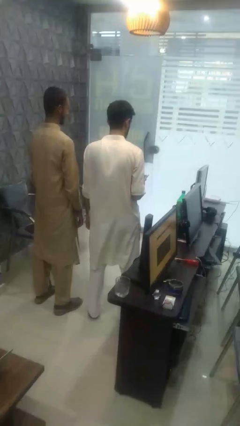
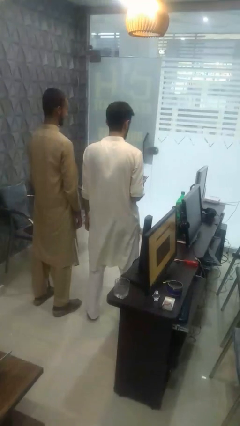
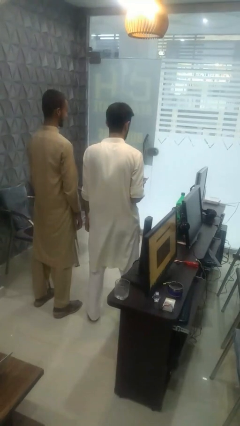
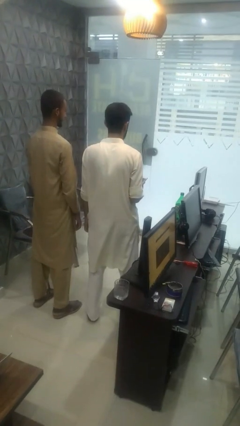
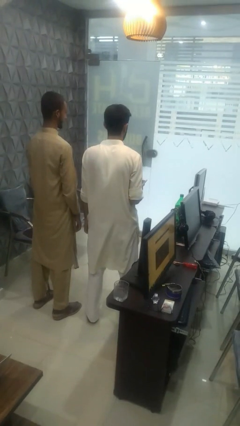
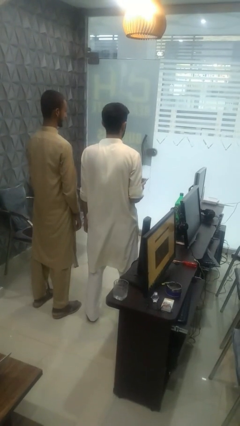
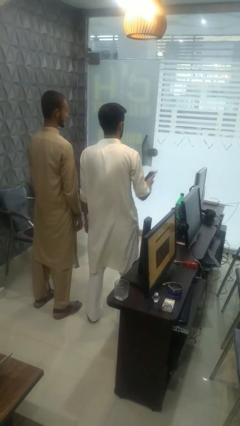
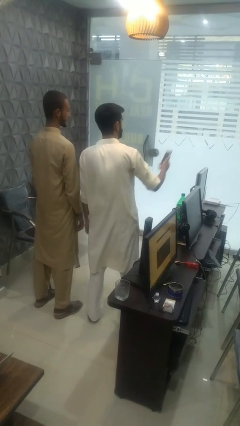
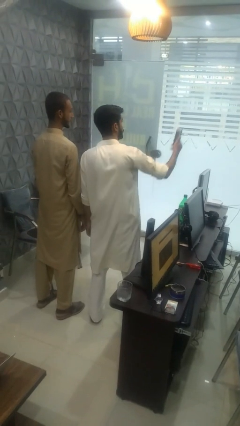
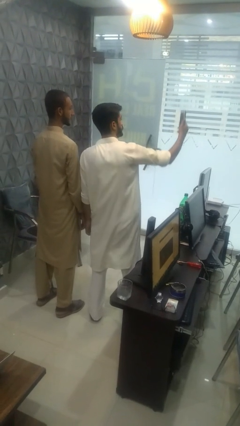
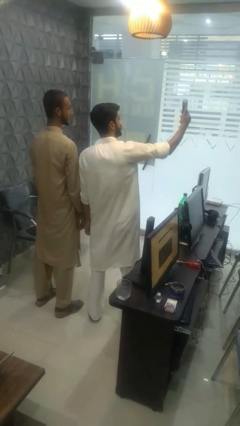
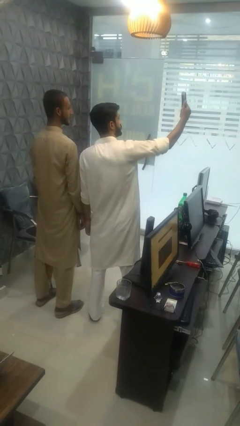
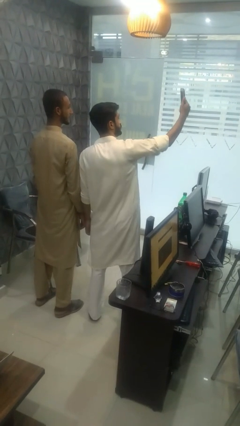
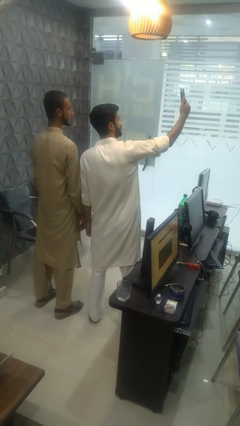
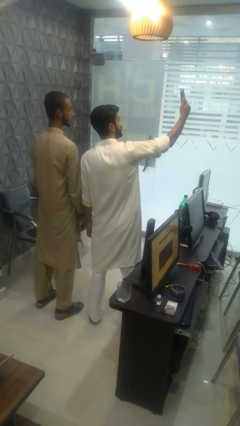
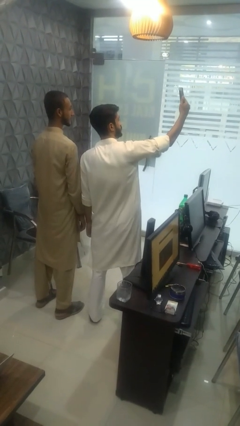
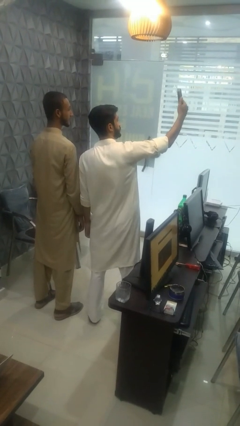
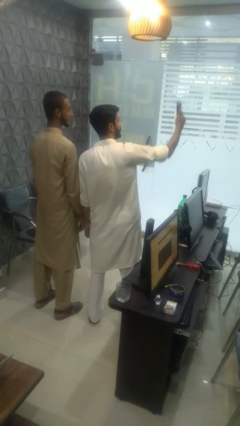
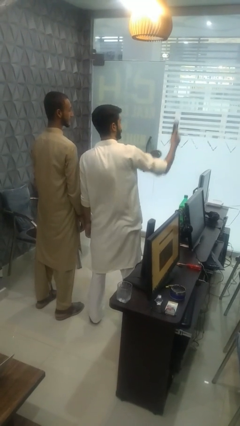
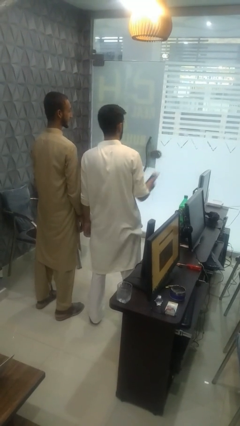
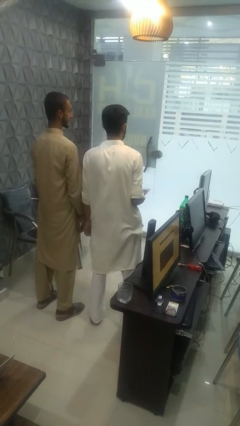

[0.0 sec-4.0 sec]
person takes selfie with person

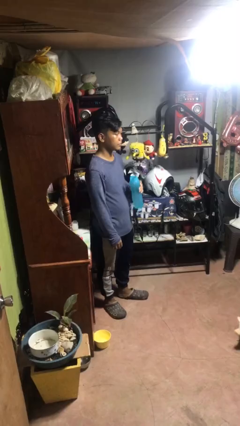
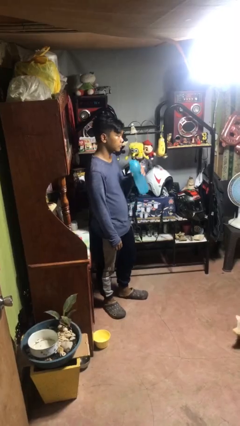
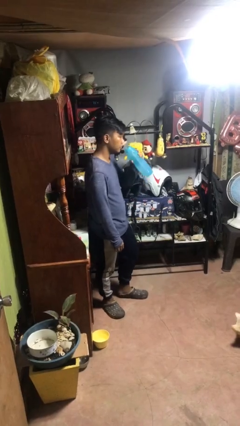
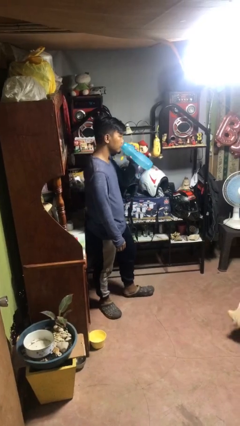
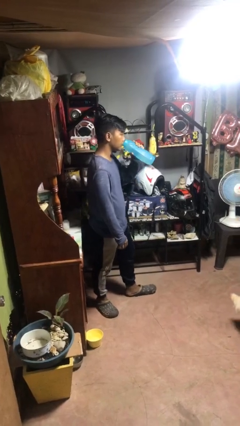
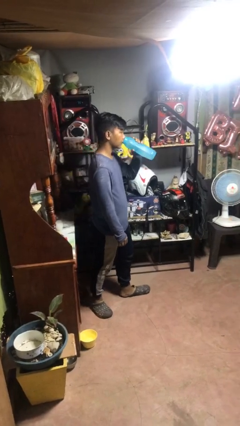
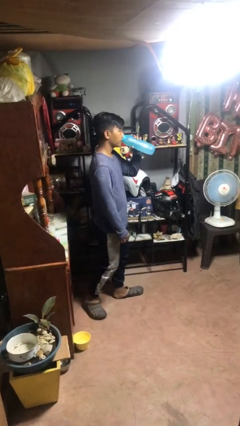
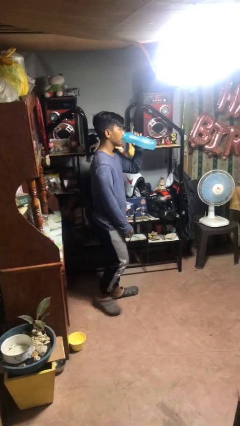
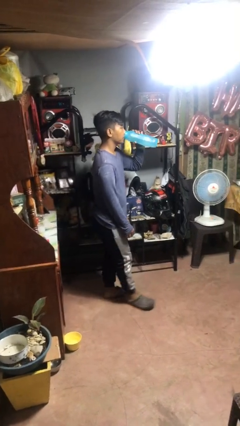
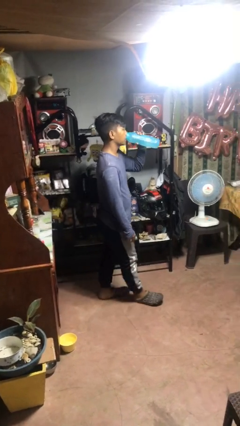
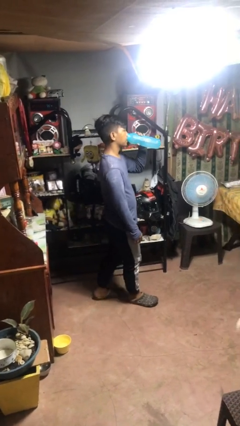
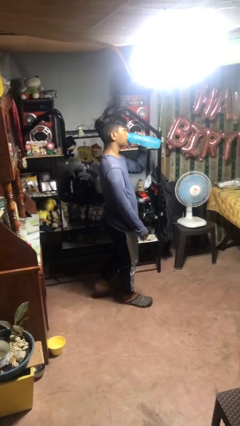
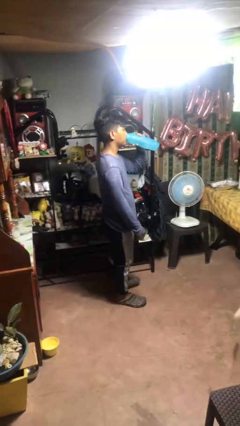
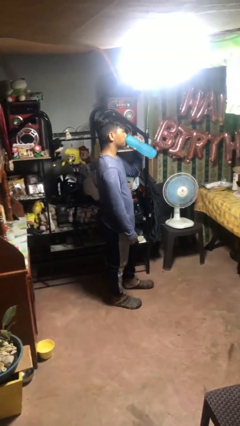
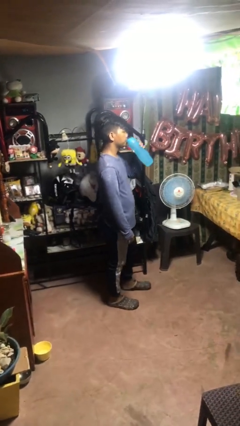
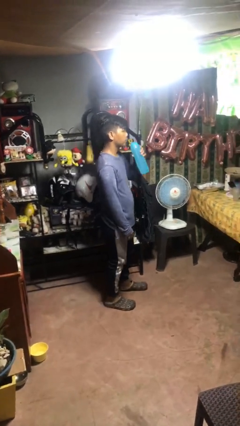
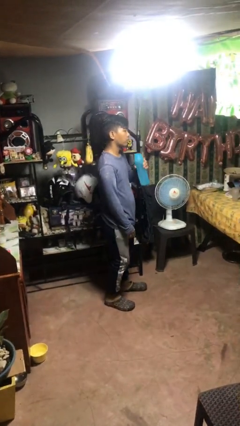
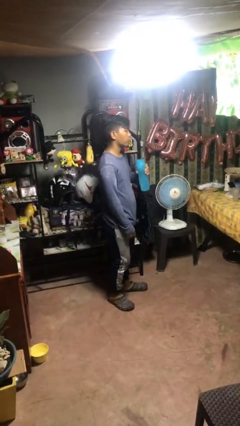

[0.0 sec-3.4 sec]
person drinks from bottle

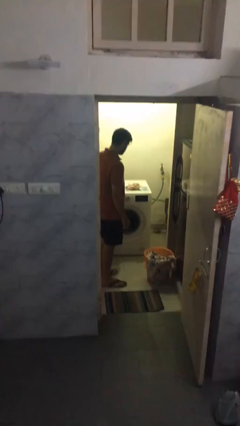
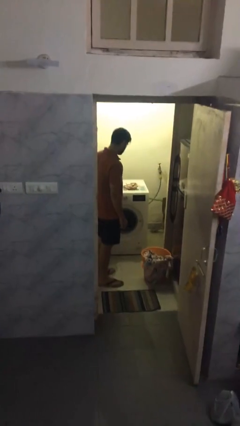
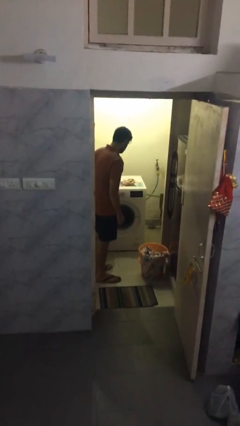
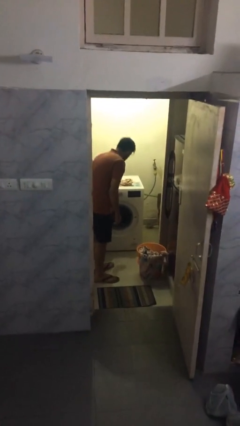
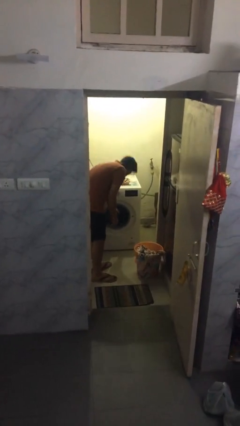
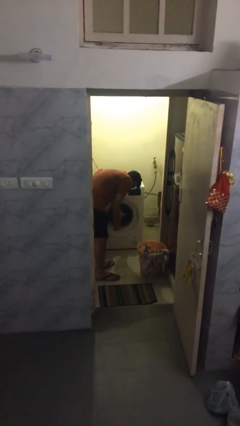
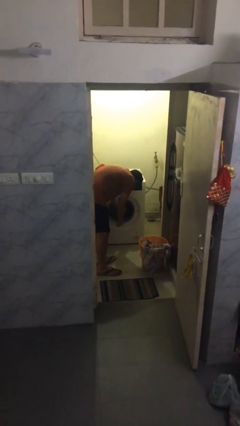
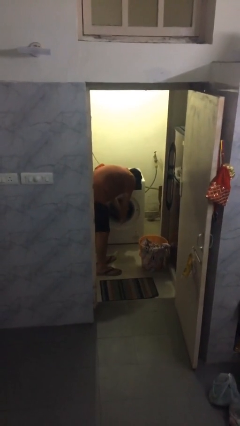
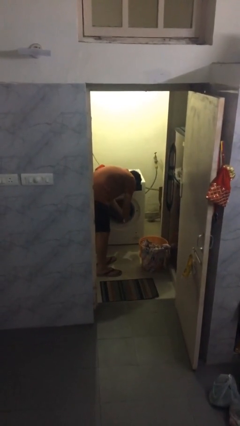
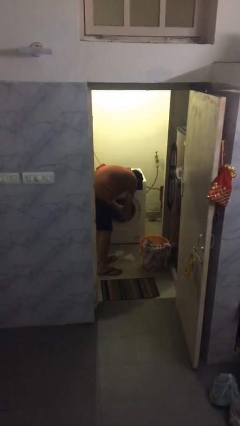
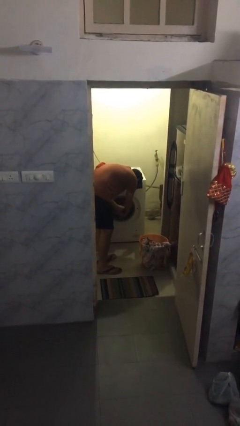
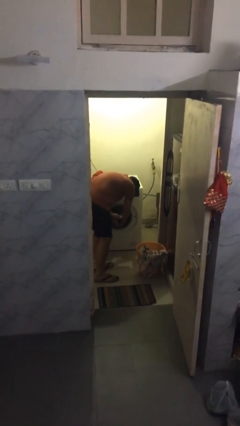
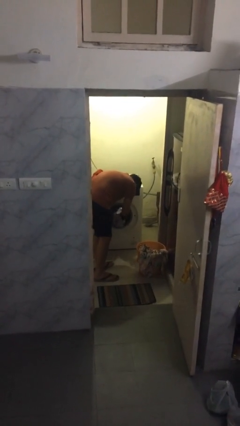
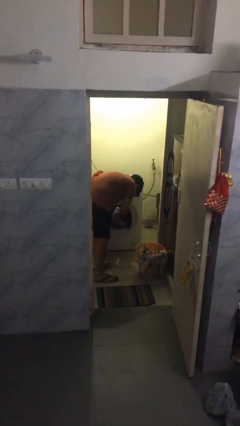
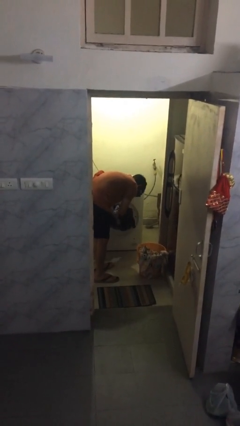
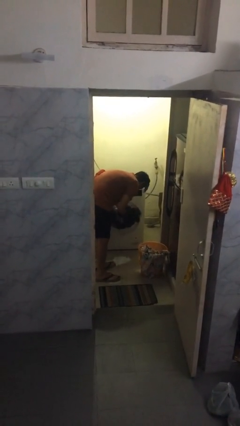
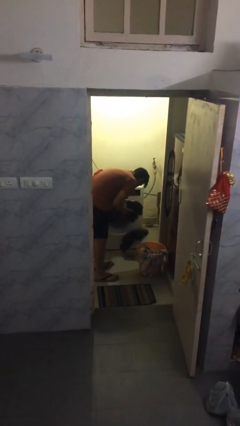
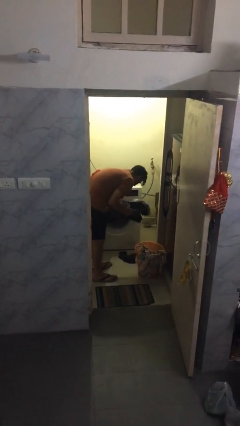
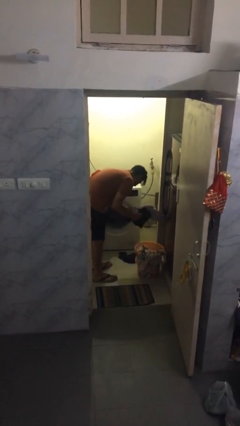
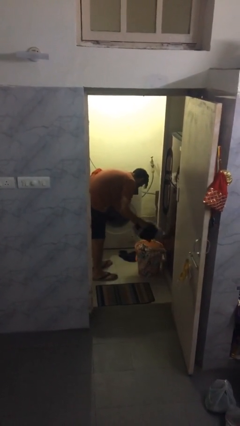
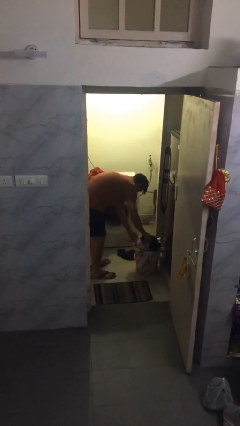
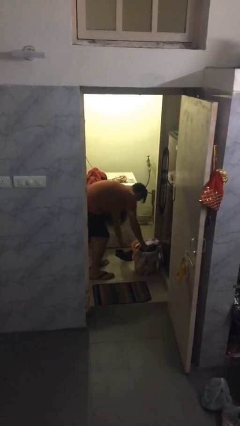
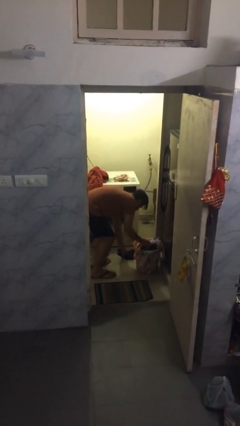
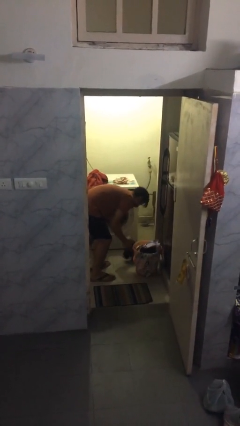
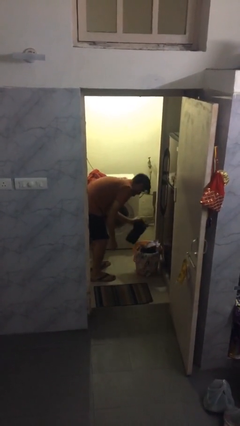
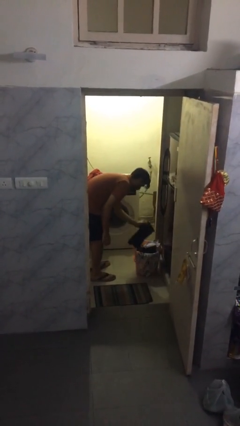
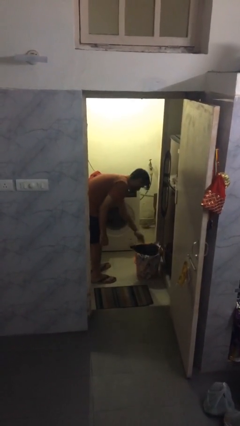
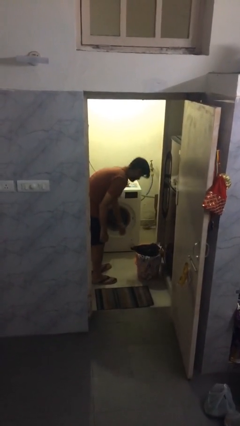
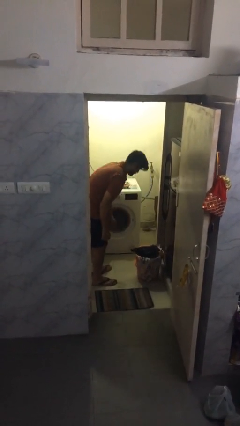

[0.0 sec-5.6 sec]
person unloads clotheswasher

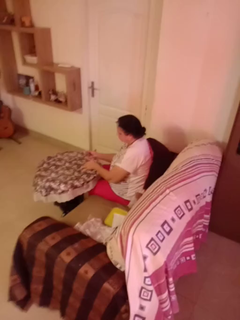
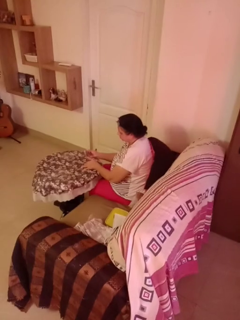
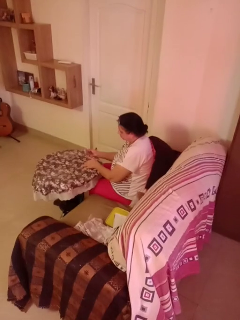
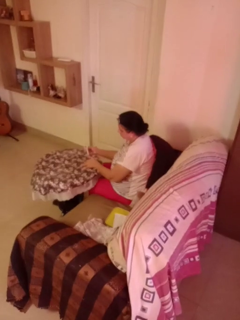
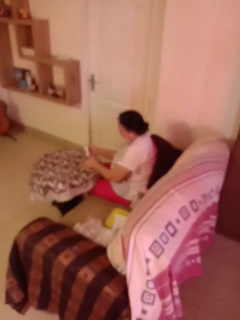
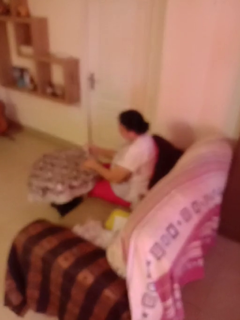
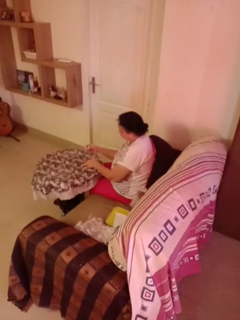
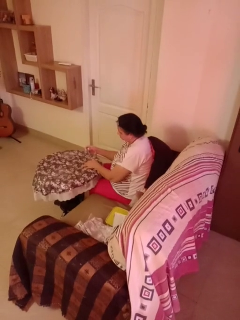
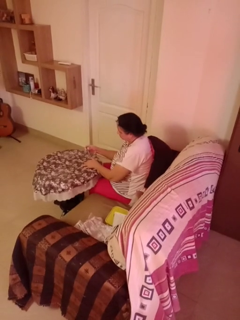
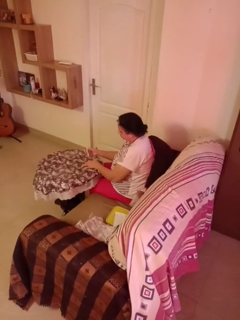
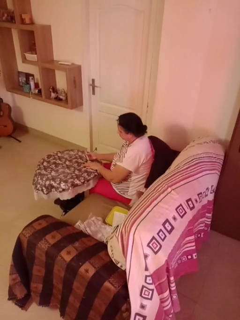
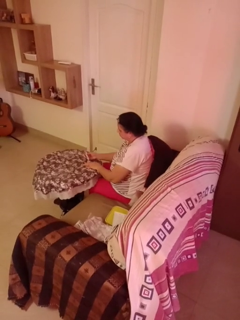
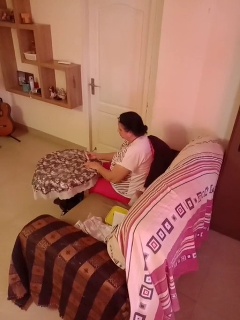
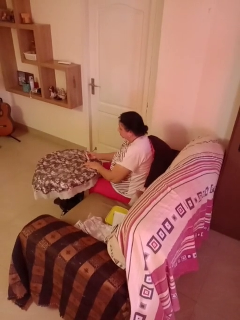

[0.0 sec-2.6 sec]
person clips fingernails

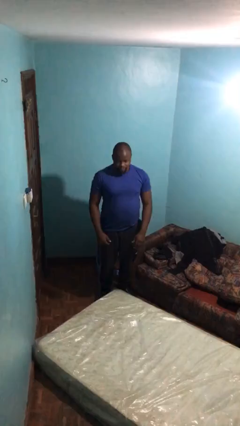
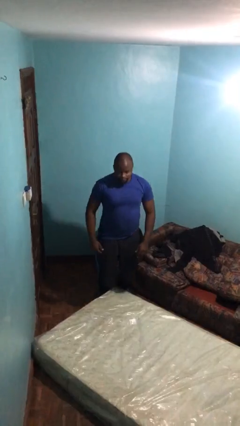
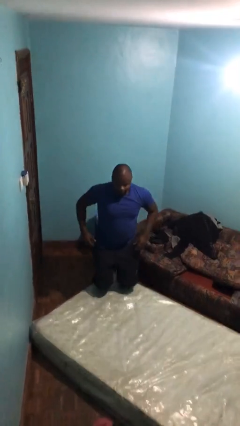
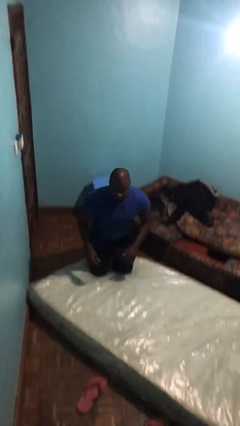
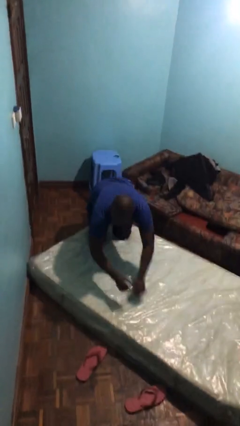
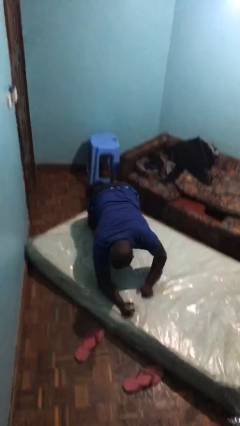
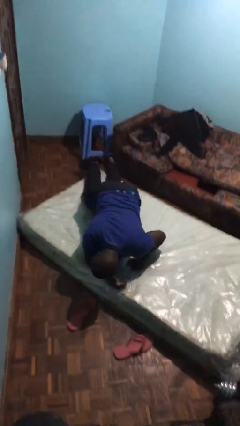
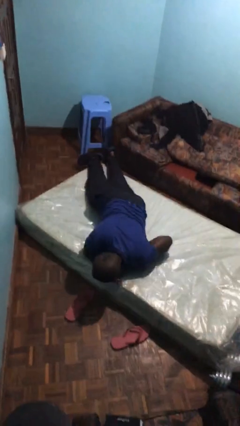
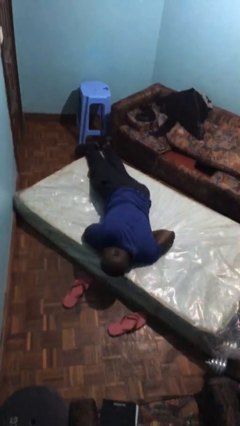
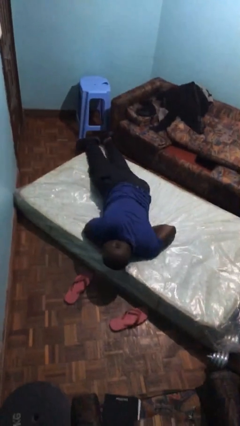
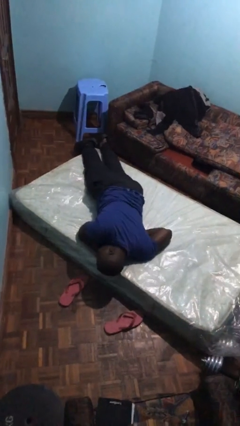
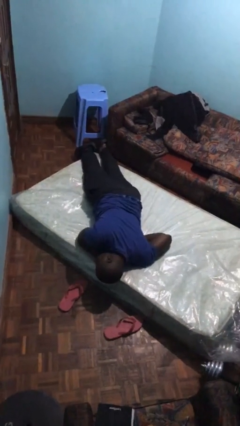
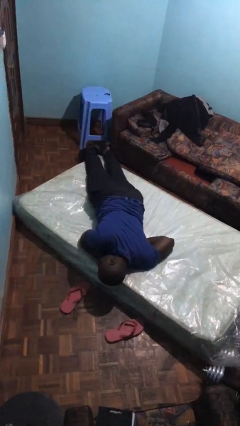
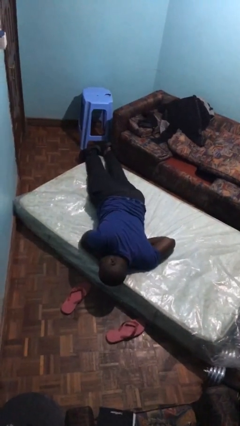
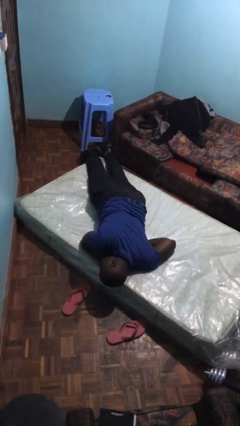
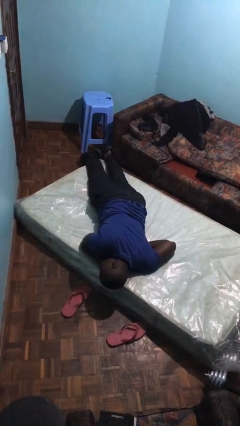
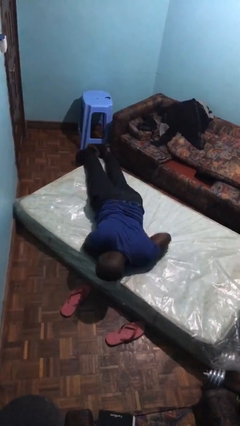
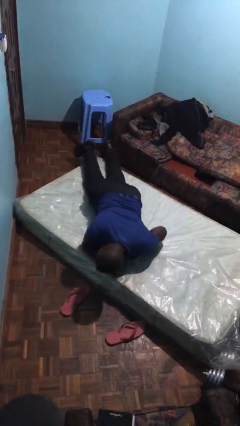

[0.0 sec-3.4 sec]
person lies down on bed
